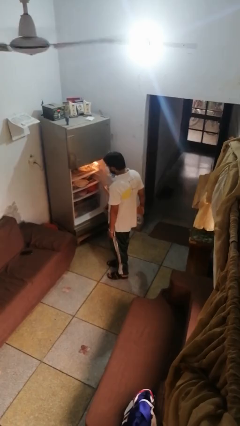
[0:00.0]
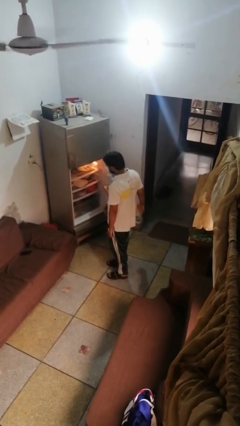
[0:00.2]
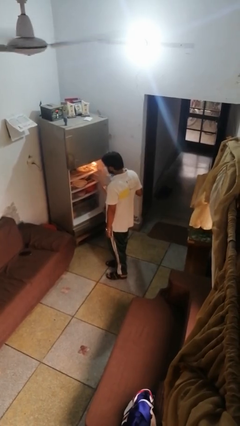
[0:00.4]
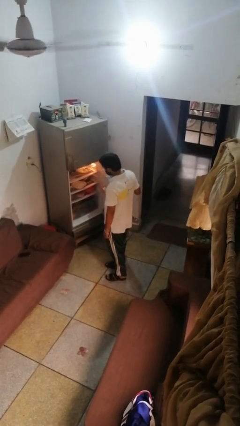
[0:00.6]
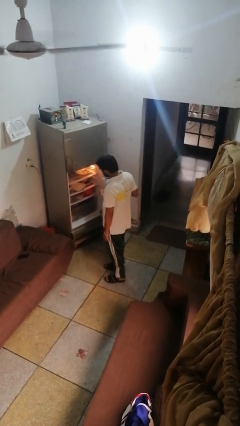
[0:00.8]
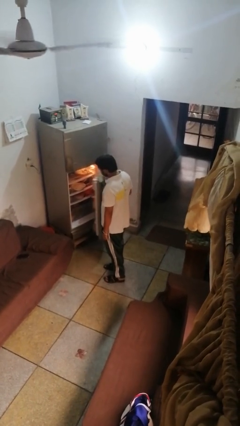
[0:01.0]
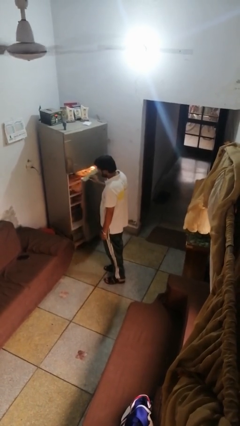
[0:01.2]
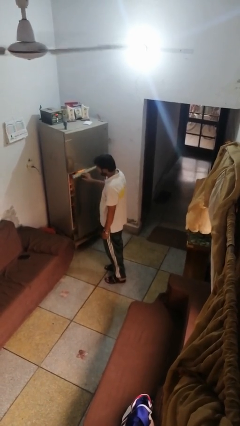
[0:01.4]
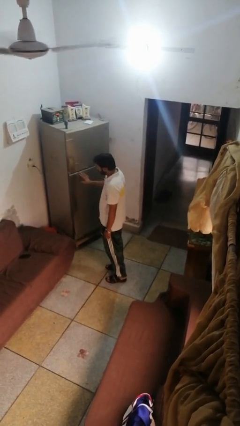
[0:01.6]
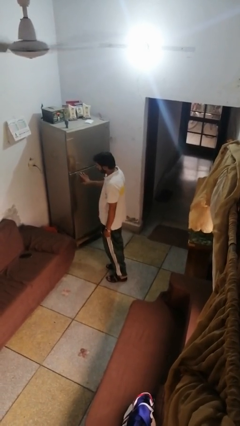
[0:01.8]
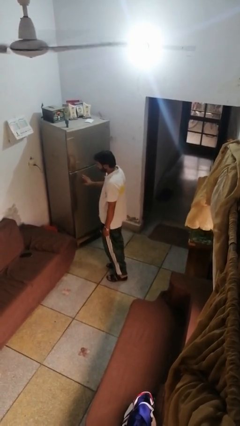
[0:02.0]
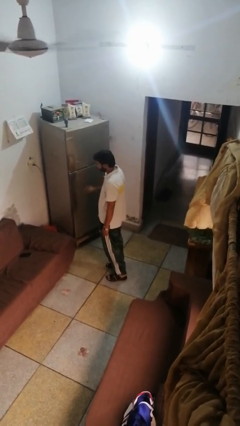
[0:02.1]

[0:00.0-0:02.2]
person closes refrigerator

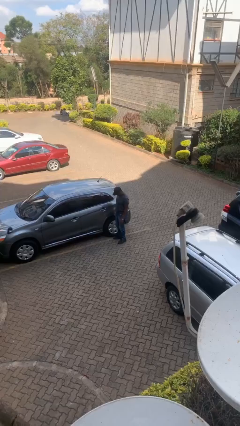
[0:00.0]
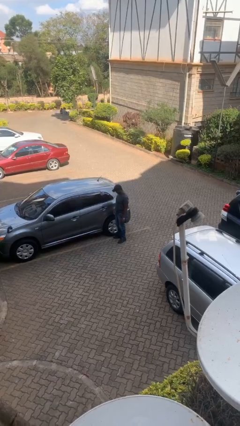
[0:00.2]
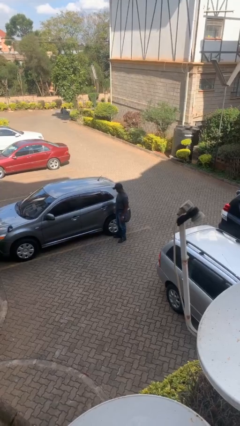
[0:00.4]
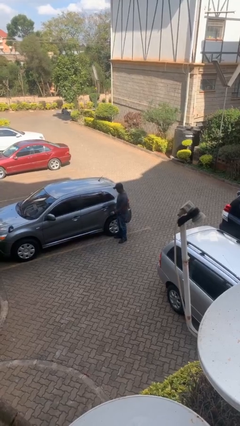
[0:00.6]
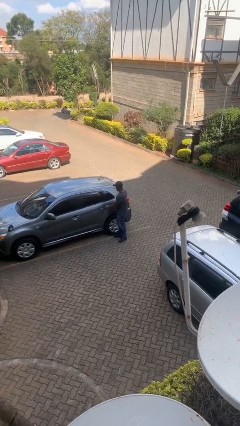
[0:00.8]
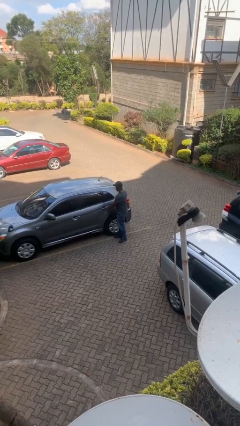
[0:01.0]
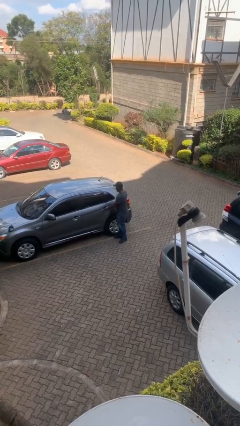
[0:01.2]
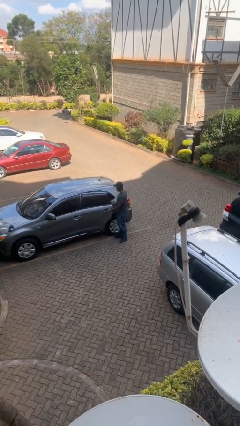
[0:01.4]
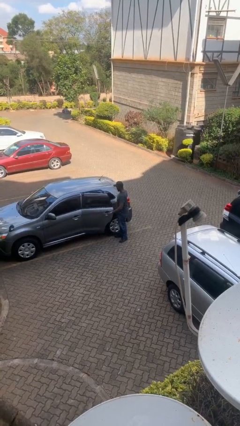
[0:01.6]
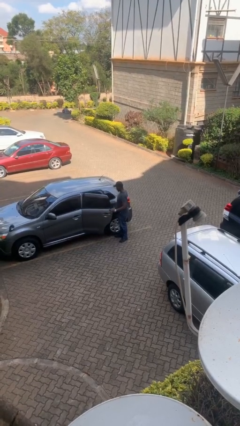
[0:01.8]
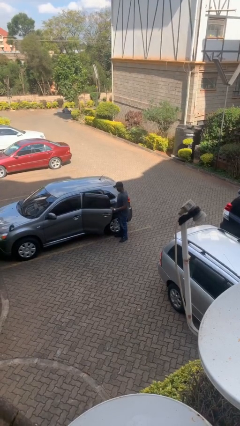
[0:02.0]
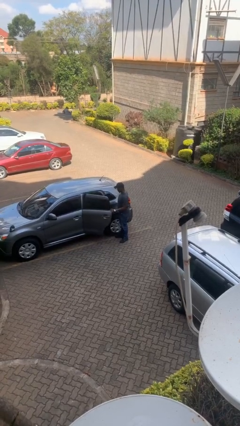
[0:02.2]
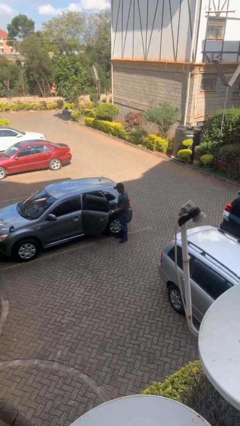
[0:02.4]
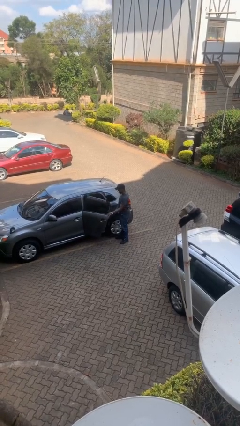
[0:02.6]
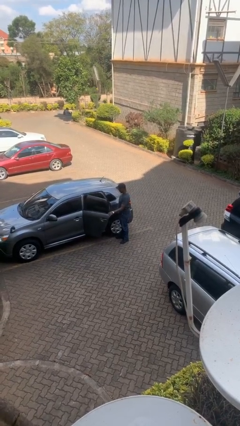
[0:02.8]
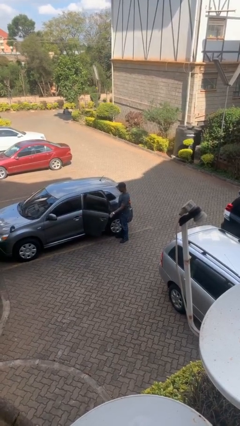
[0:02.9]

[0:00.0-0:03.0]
person opens car door

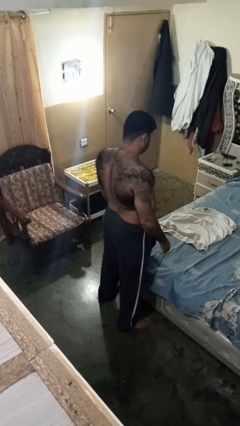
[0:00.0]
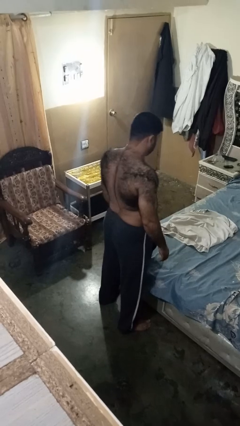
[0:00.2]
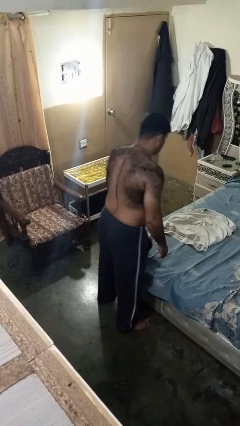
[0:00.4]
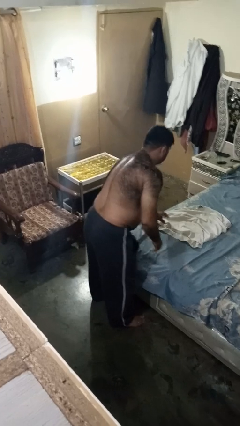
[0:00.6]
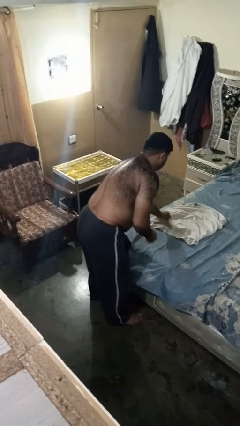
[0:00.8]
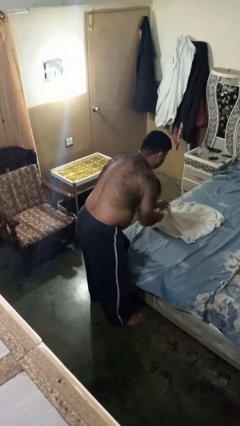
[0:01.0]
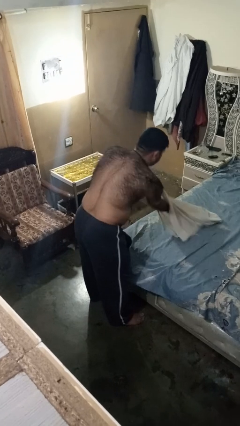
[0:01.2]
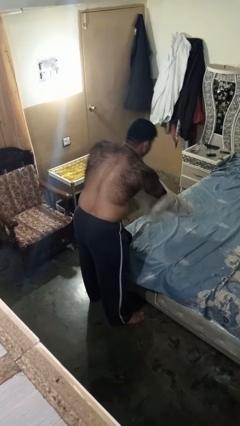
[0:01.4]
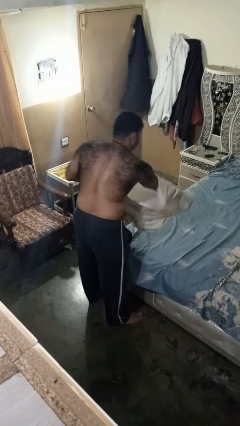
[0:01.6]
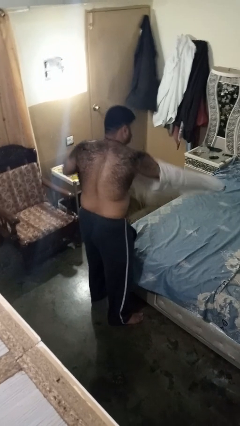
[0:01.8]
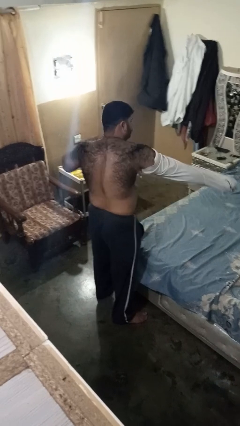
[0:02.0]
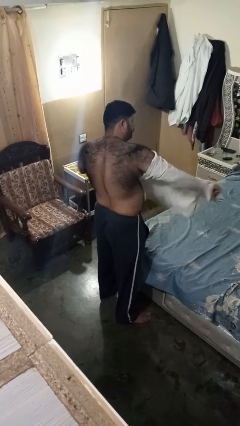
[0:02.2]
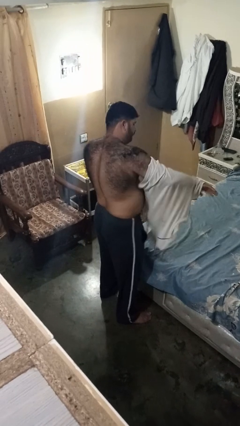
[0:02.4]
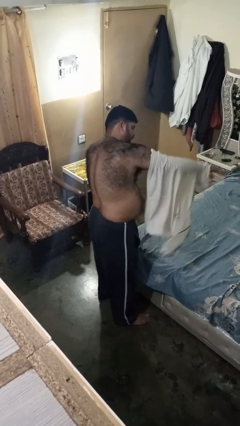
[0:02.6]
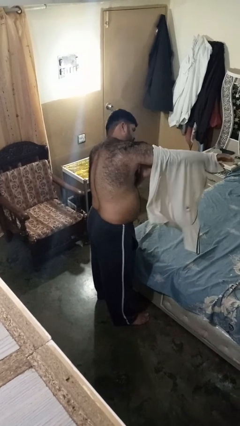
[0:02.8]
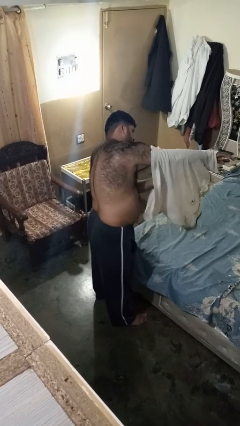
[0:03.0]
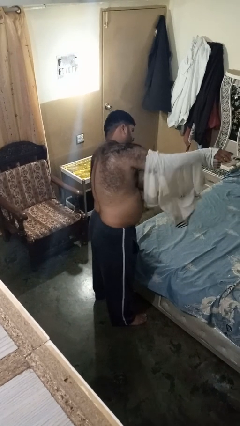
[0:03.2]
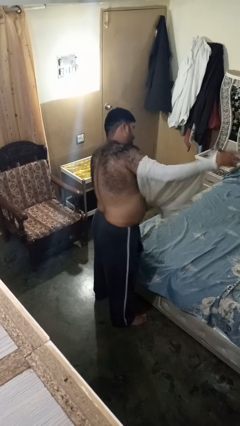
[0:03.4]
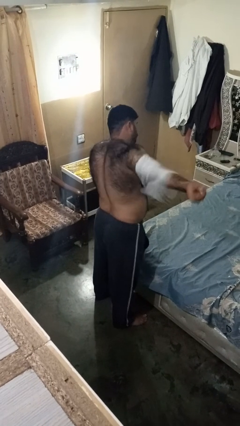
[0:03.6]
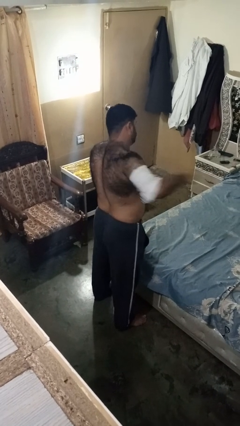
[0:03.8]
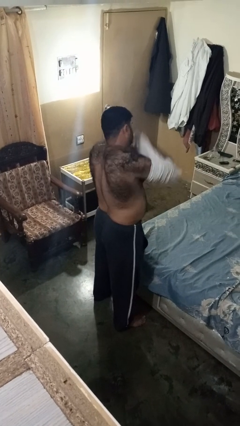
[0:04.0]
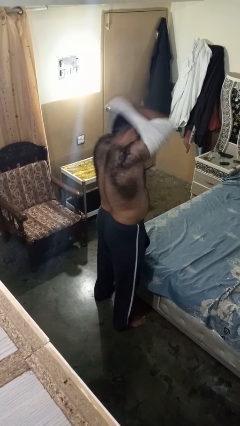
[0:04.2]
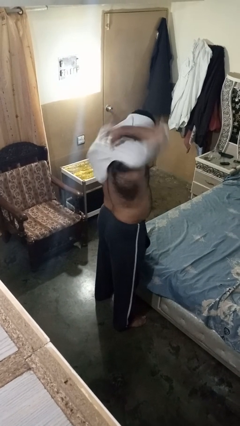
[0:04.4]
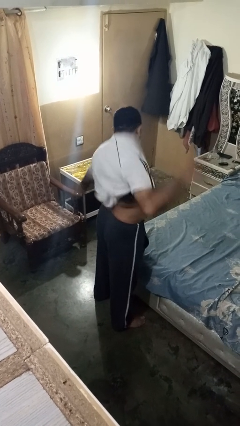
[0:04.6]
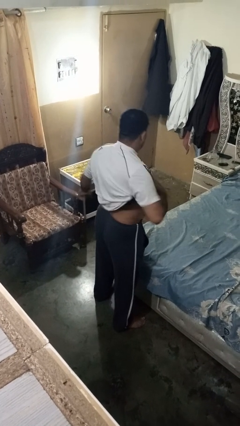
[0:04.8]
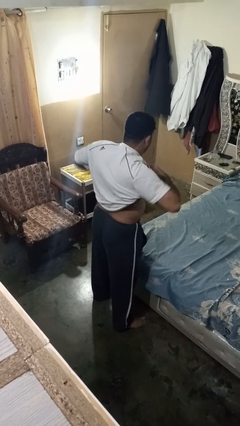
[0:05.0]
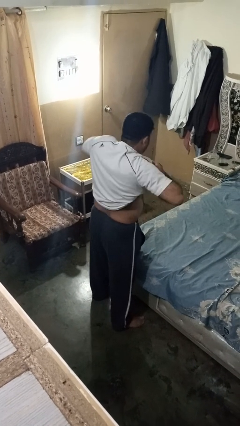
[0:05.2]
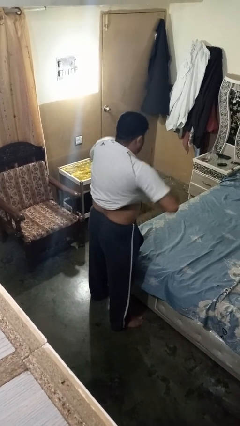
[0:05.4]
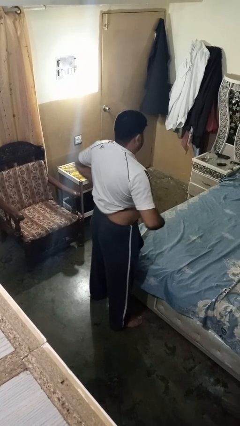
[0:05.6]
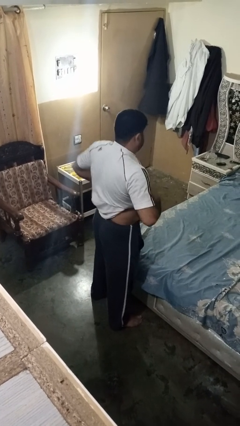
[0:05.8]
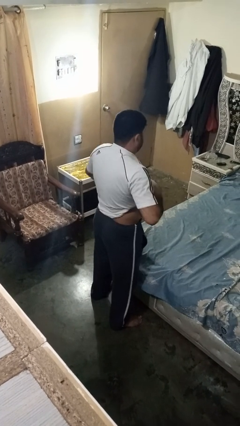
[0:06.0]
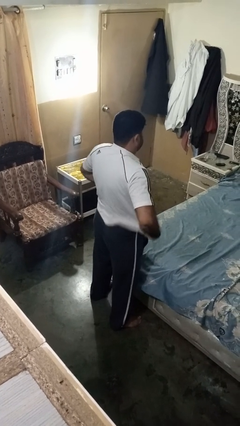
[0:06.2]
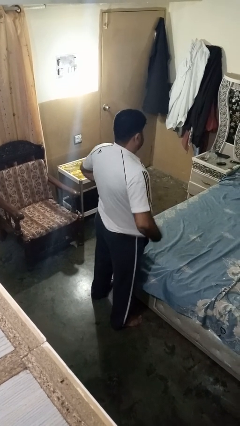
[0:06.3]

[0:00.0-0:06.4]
person puts on shirt

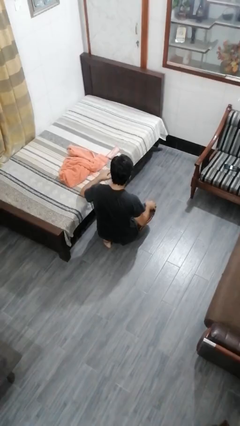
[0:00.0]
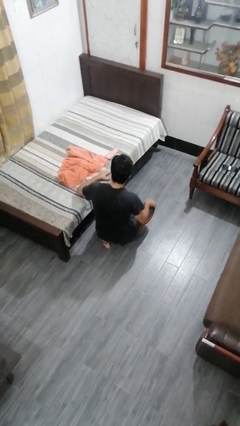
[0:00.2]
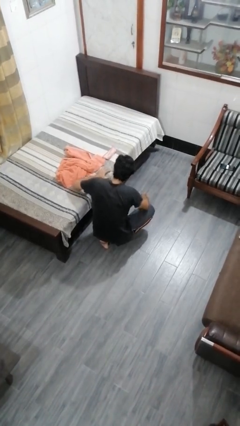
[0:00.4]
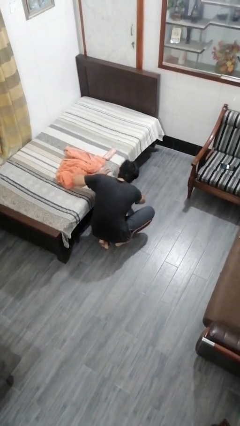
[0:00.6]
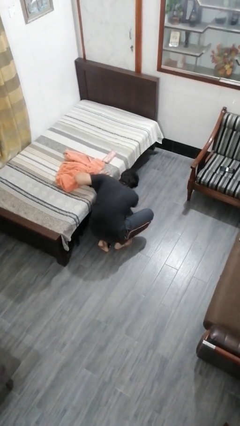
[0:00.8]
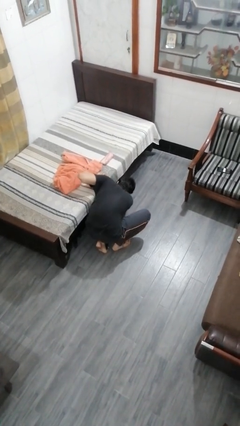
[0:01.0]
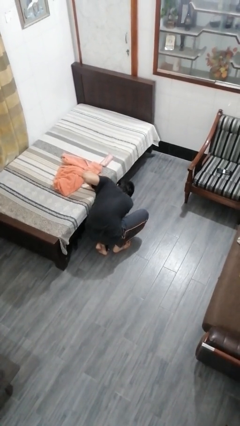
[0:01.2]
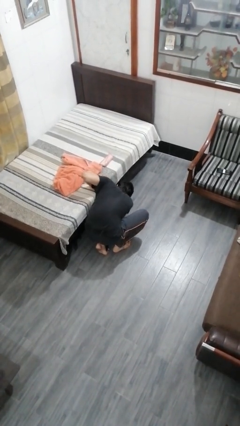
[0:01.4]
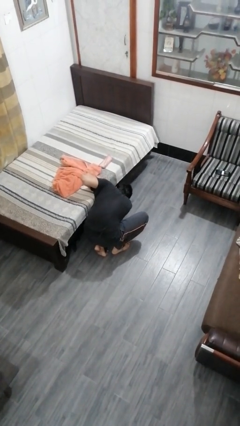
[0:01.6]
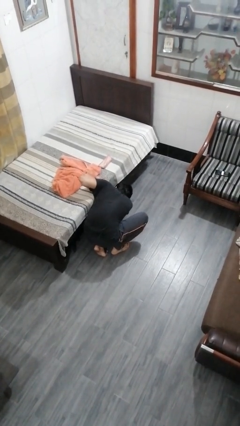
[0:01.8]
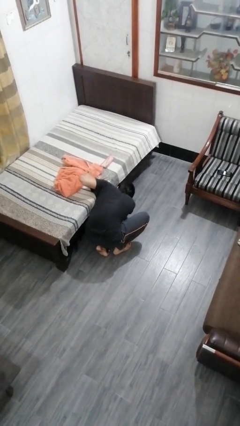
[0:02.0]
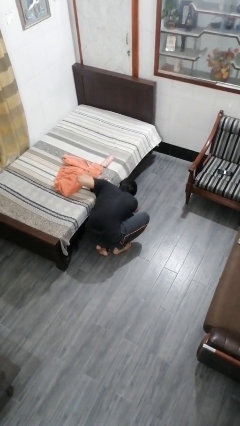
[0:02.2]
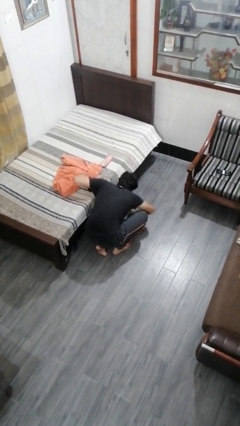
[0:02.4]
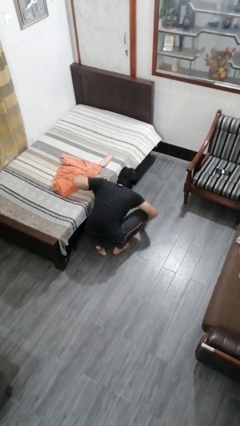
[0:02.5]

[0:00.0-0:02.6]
person searches under bed

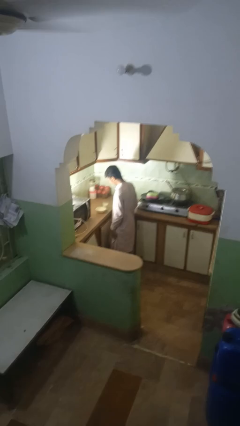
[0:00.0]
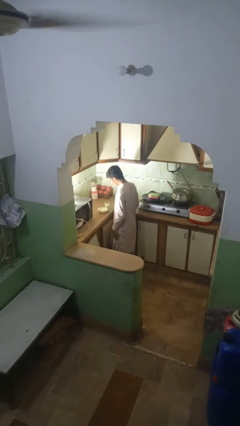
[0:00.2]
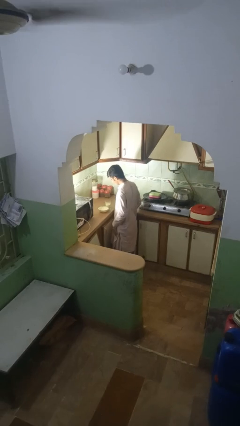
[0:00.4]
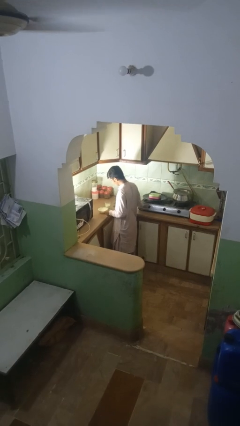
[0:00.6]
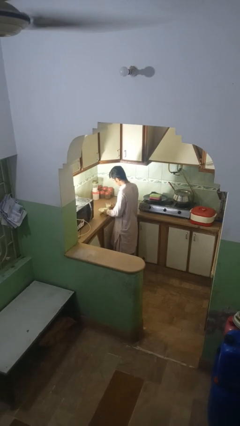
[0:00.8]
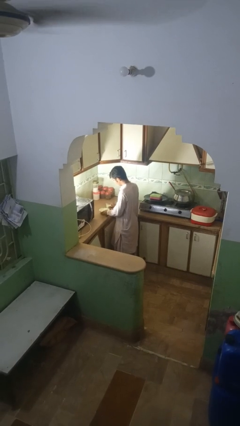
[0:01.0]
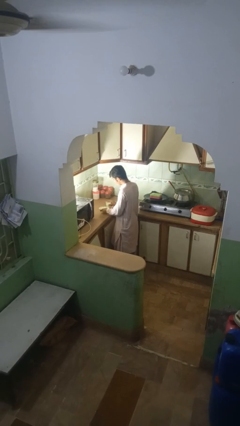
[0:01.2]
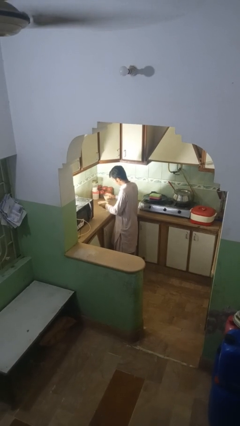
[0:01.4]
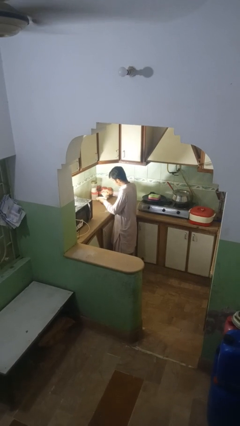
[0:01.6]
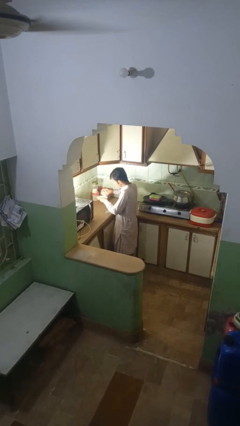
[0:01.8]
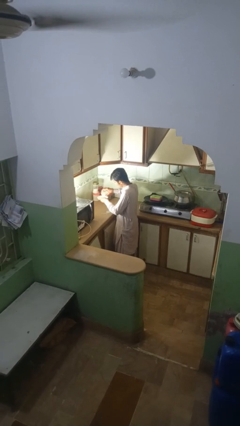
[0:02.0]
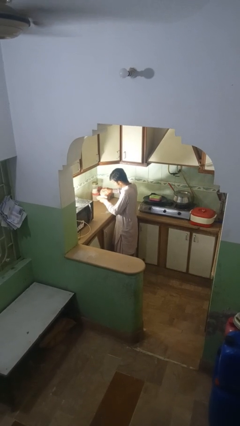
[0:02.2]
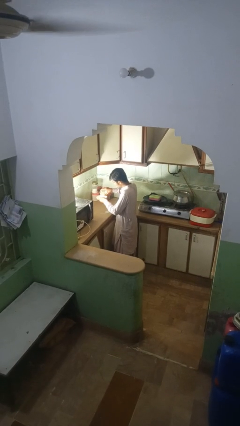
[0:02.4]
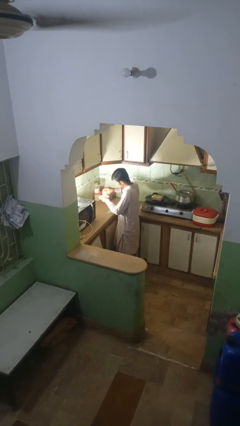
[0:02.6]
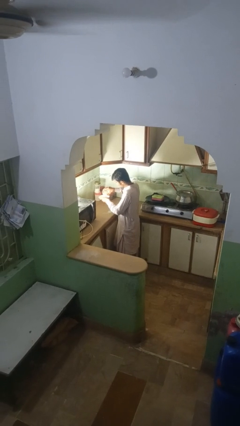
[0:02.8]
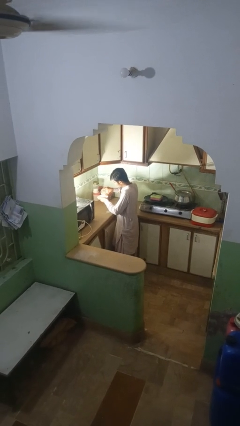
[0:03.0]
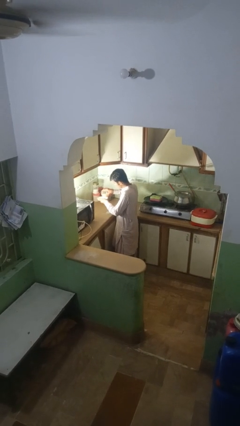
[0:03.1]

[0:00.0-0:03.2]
person pours into bowl
